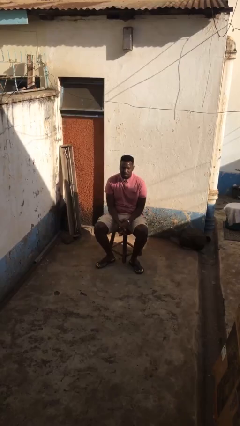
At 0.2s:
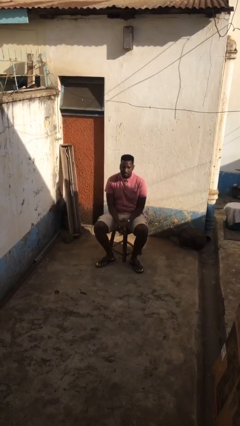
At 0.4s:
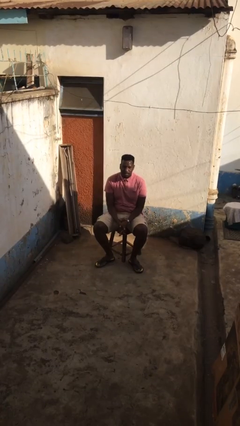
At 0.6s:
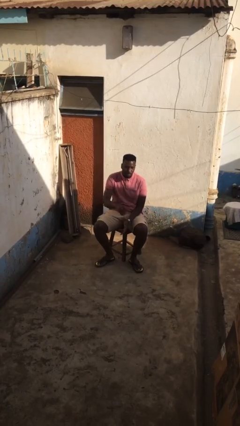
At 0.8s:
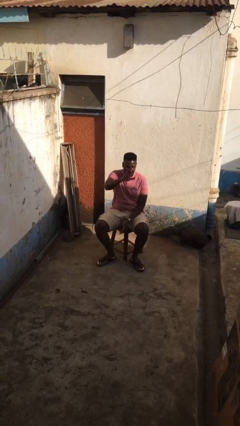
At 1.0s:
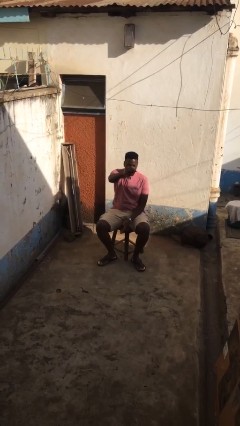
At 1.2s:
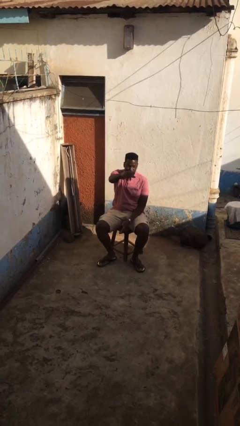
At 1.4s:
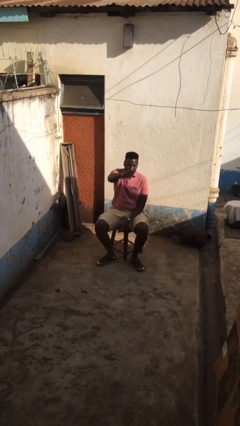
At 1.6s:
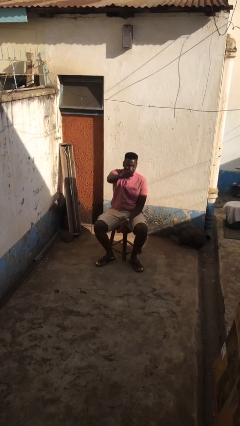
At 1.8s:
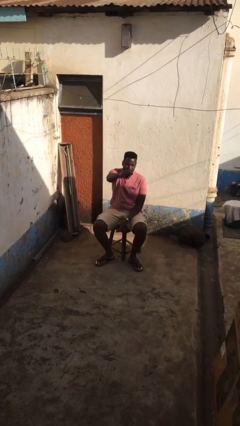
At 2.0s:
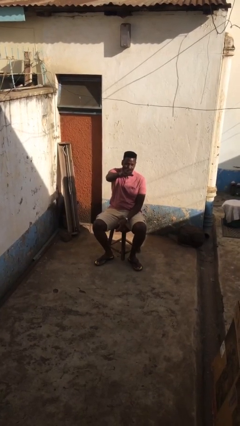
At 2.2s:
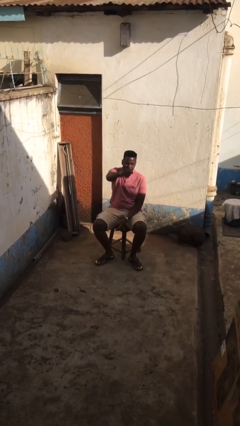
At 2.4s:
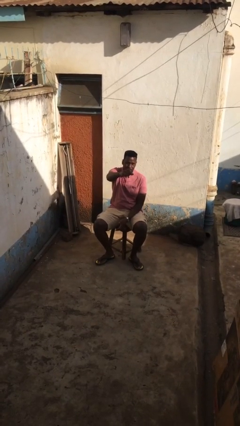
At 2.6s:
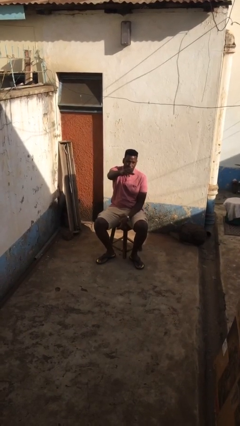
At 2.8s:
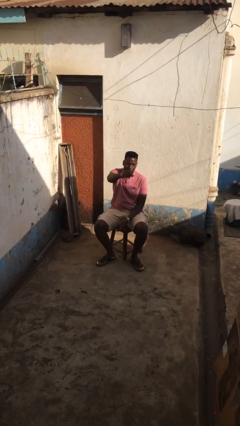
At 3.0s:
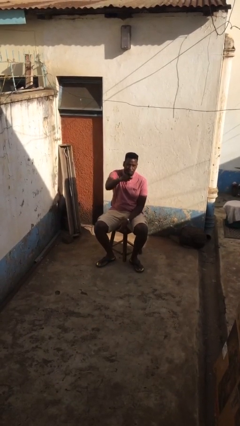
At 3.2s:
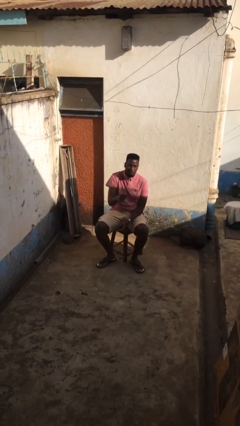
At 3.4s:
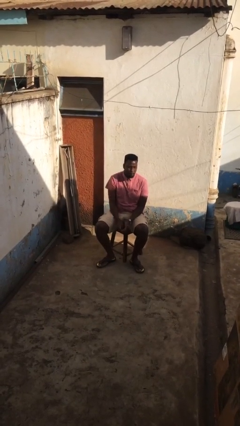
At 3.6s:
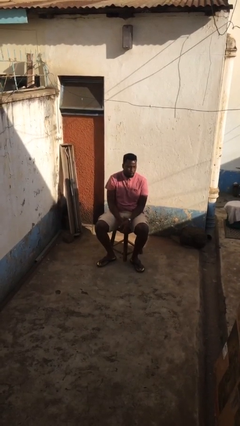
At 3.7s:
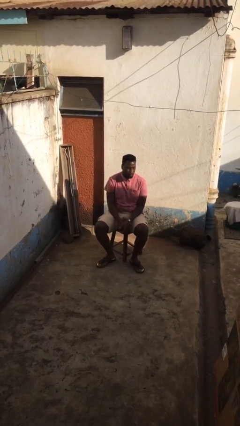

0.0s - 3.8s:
person gestures come here

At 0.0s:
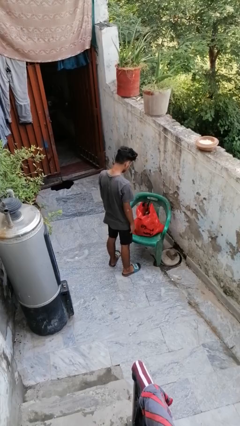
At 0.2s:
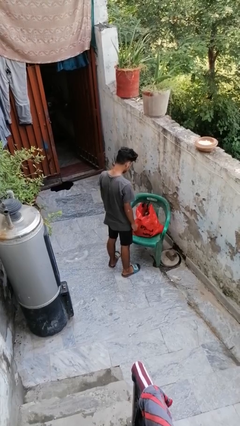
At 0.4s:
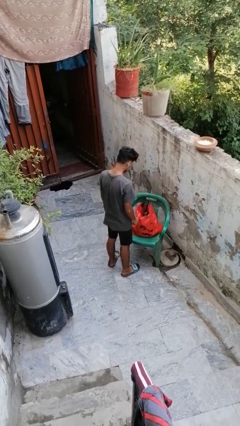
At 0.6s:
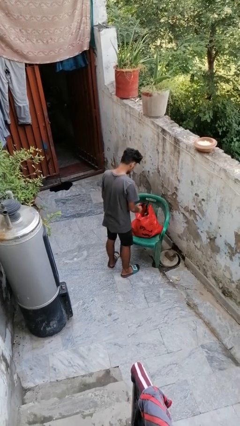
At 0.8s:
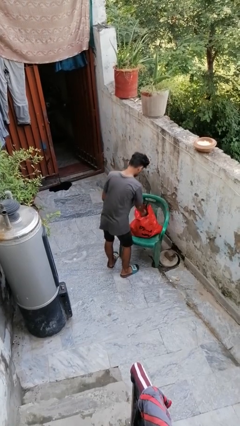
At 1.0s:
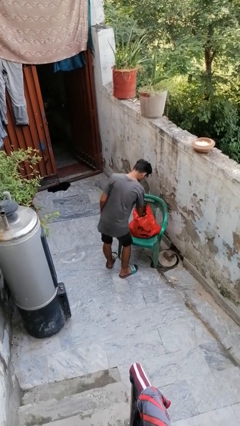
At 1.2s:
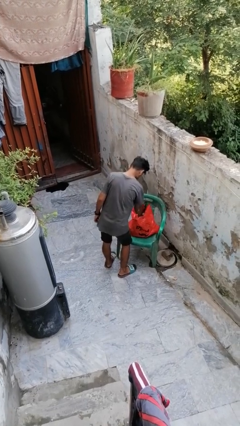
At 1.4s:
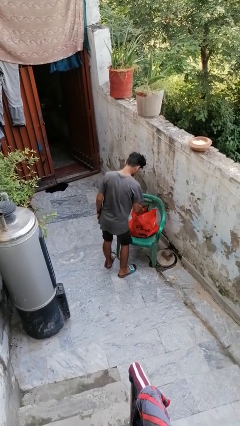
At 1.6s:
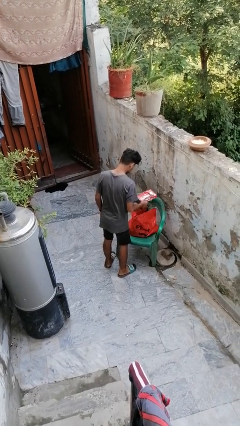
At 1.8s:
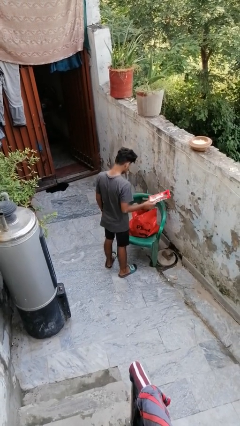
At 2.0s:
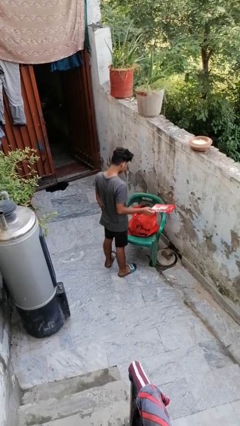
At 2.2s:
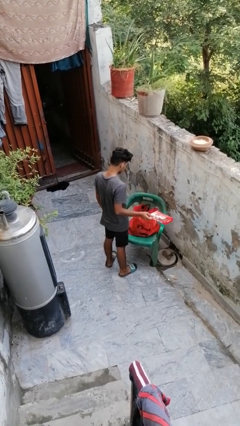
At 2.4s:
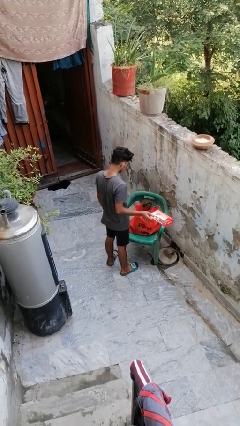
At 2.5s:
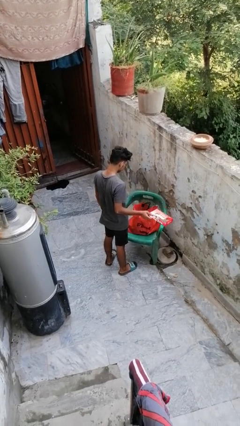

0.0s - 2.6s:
person takes object from bag

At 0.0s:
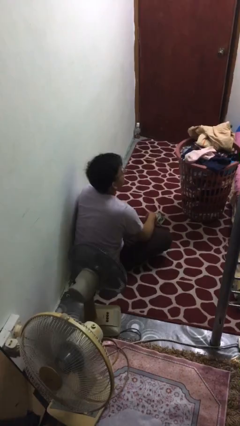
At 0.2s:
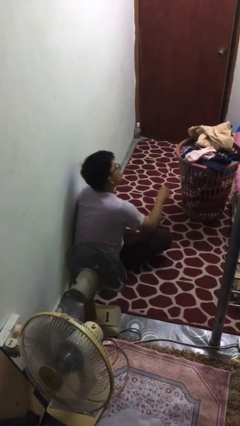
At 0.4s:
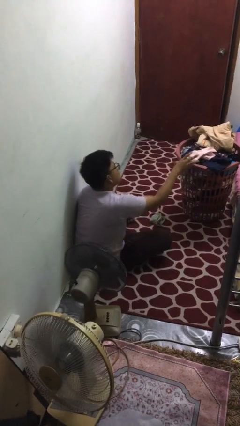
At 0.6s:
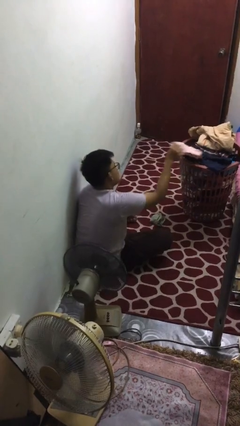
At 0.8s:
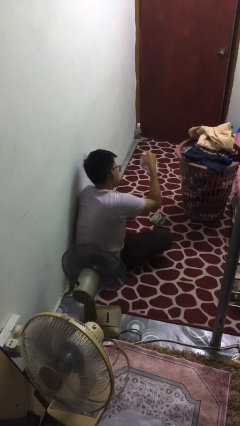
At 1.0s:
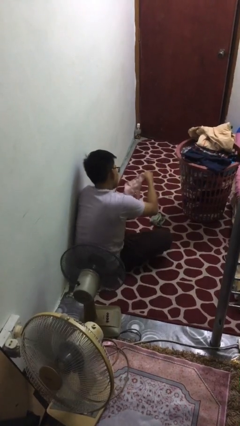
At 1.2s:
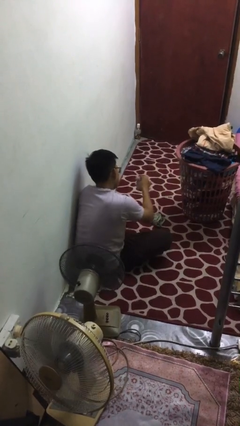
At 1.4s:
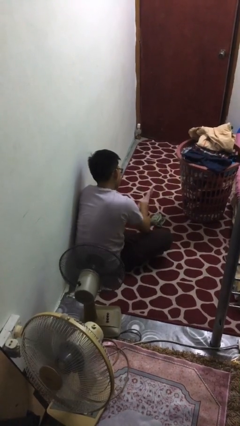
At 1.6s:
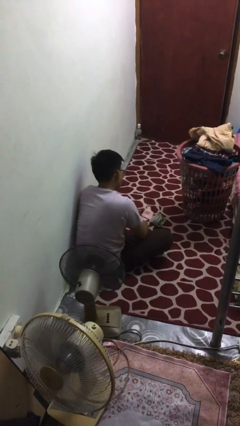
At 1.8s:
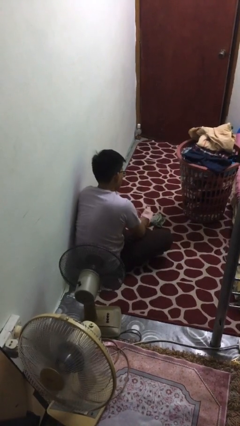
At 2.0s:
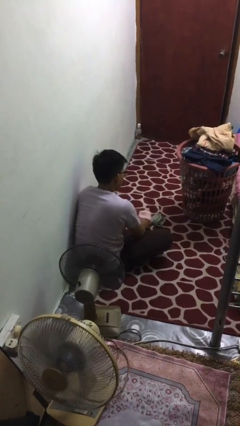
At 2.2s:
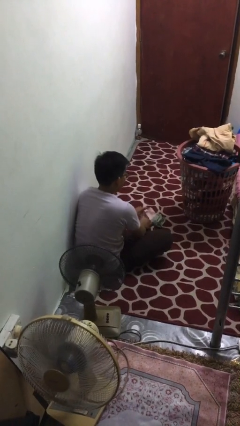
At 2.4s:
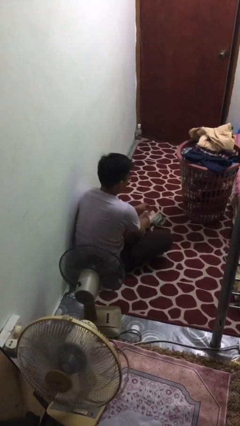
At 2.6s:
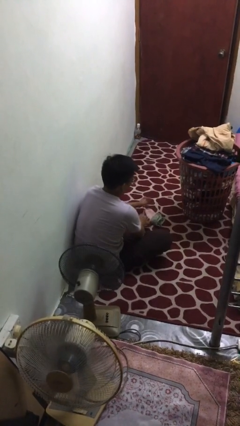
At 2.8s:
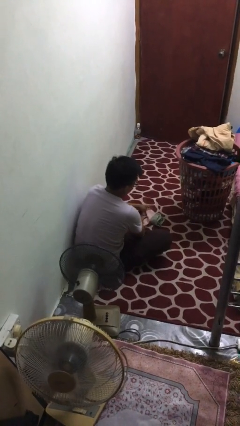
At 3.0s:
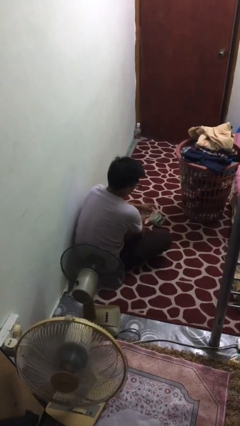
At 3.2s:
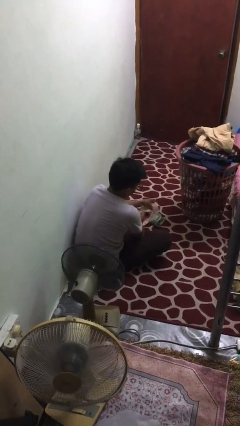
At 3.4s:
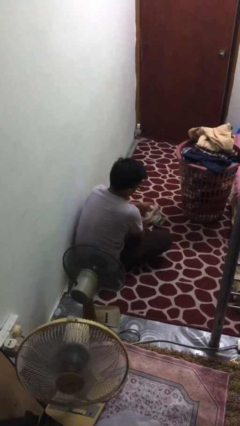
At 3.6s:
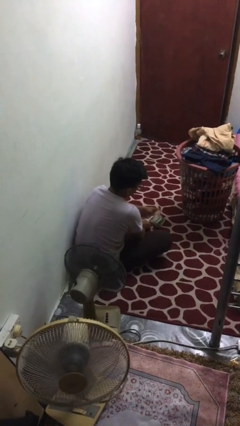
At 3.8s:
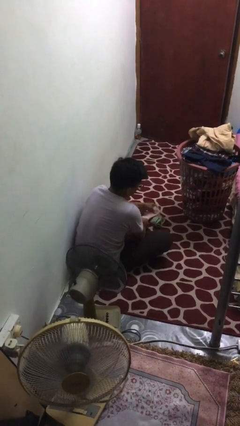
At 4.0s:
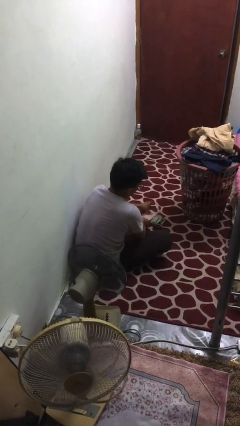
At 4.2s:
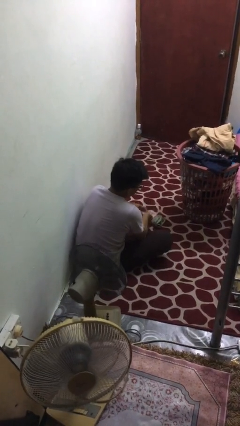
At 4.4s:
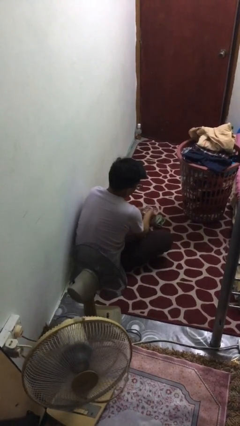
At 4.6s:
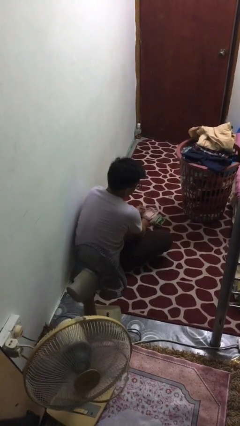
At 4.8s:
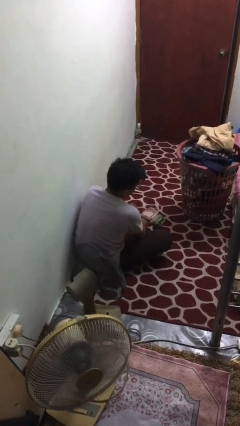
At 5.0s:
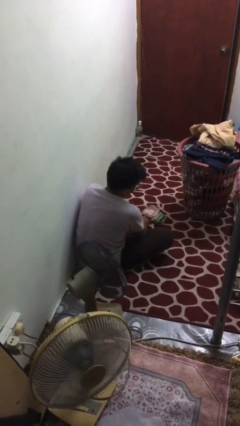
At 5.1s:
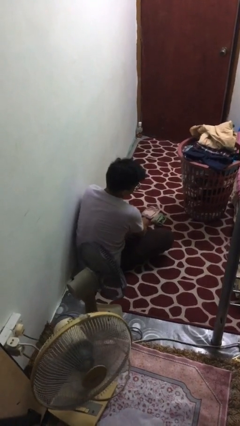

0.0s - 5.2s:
person folds socks

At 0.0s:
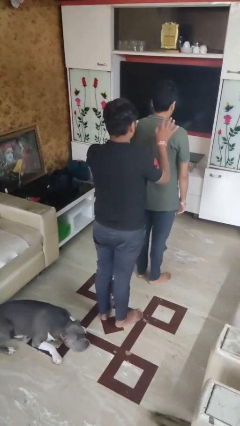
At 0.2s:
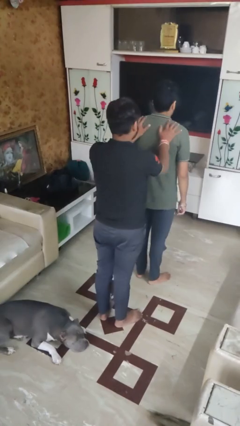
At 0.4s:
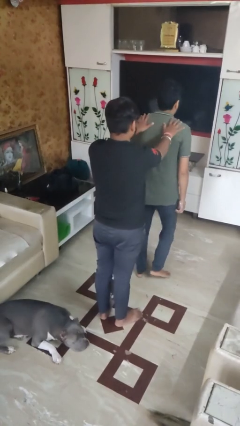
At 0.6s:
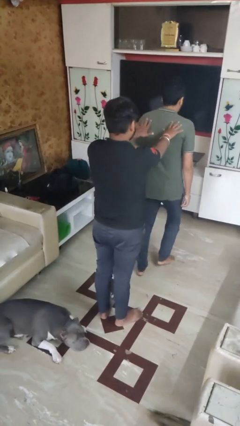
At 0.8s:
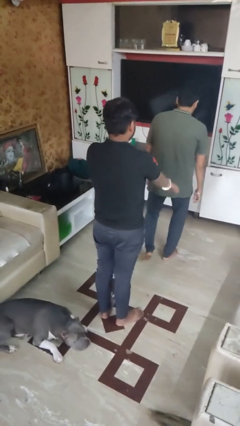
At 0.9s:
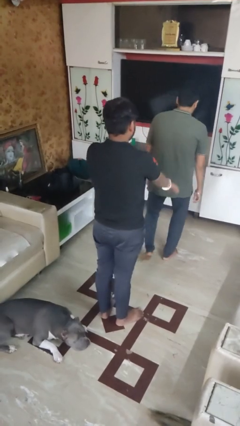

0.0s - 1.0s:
person shoves person

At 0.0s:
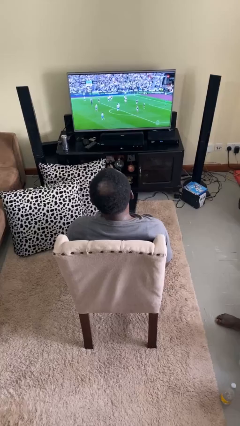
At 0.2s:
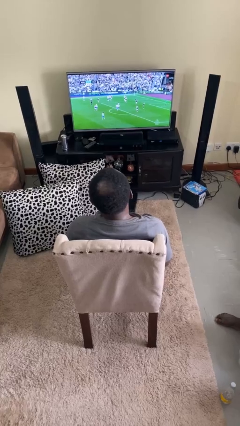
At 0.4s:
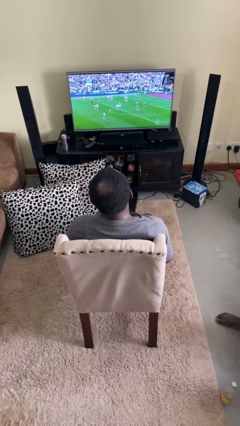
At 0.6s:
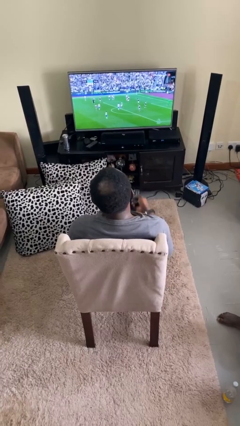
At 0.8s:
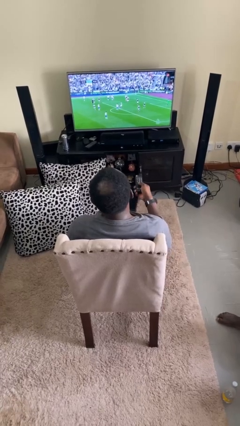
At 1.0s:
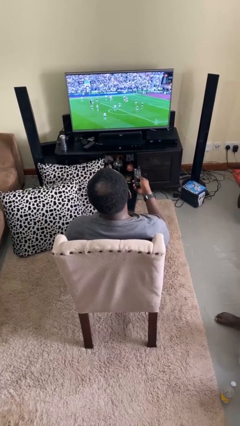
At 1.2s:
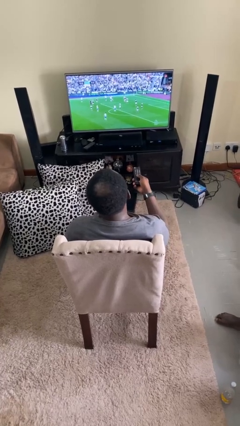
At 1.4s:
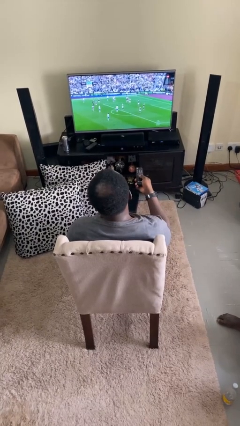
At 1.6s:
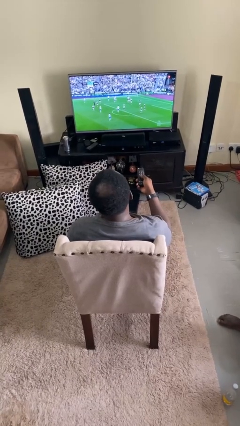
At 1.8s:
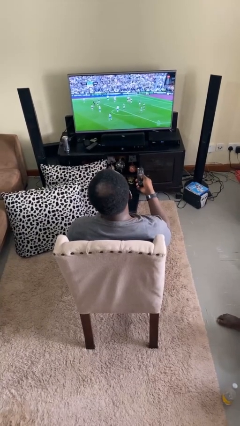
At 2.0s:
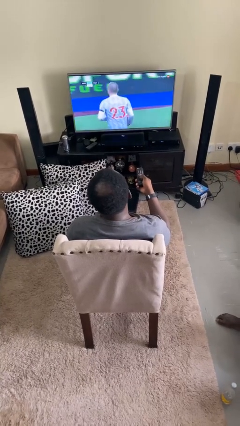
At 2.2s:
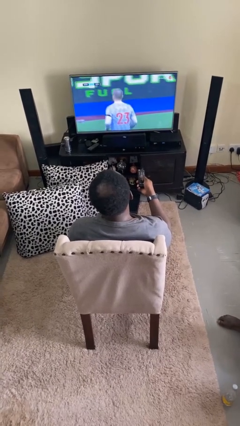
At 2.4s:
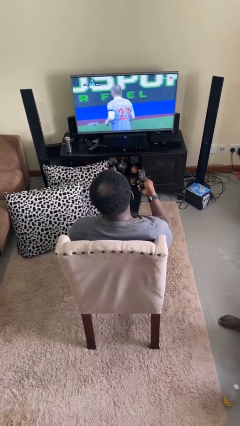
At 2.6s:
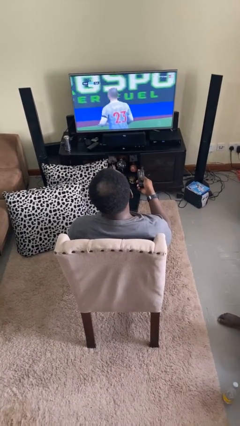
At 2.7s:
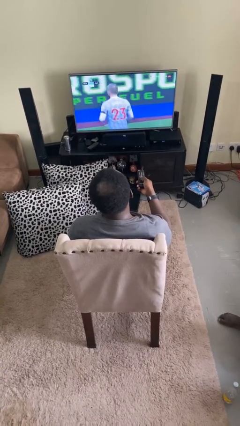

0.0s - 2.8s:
person uses television remote

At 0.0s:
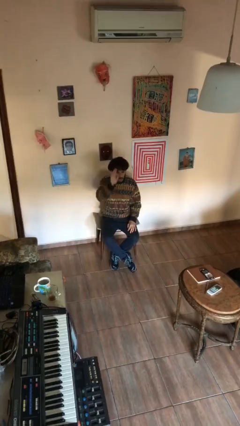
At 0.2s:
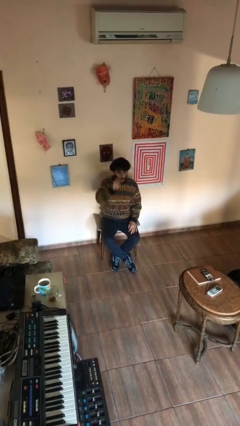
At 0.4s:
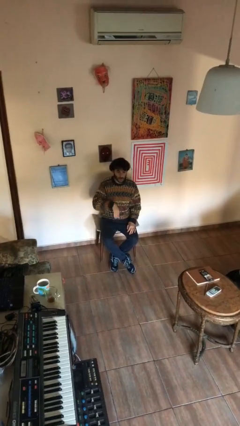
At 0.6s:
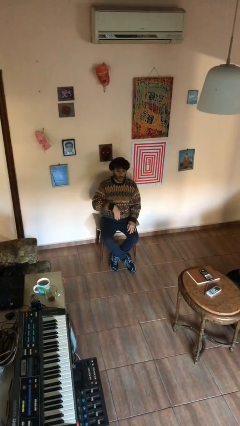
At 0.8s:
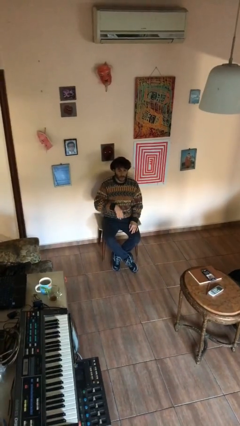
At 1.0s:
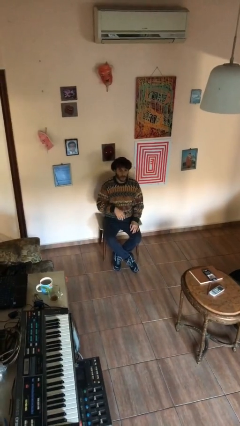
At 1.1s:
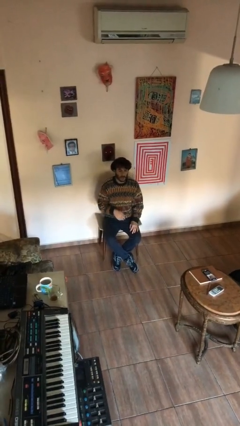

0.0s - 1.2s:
person gestures swipe down

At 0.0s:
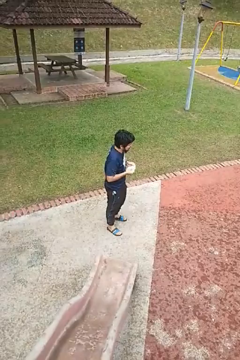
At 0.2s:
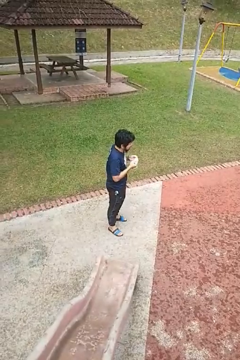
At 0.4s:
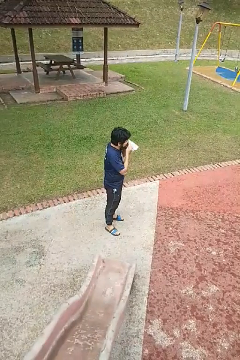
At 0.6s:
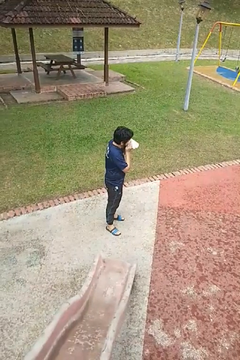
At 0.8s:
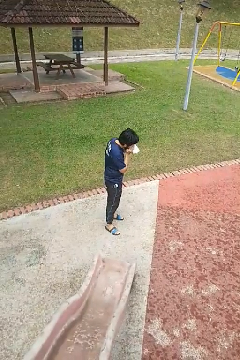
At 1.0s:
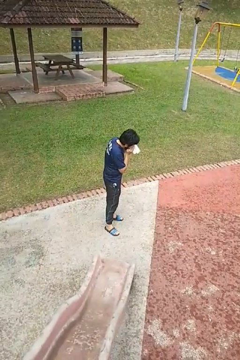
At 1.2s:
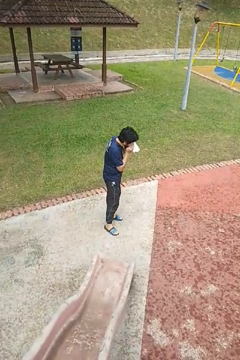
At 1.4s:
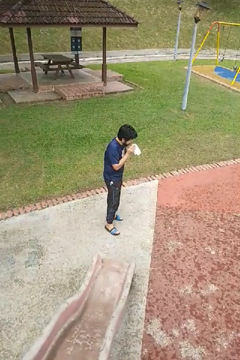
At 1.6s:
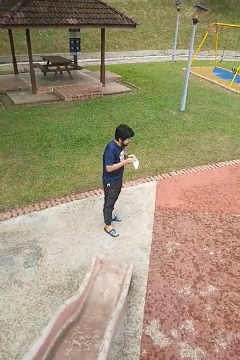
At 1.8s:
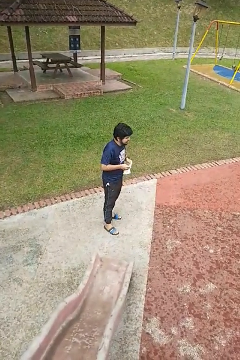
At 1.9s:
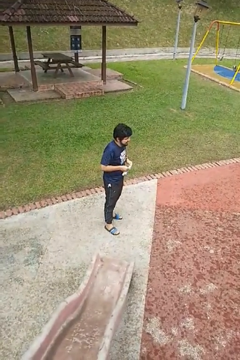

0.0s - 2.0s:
person blows nose
